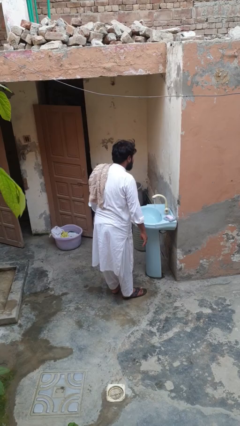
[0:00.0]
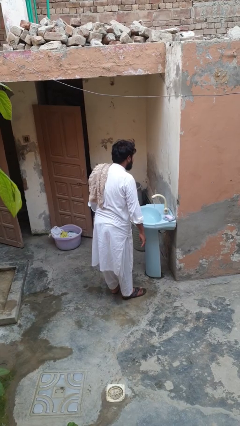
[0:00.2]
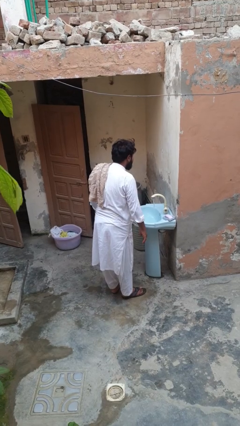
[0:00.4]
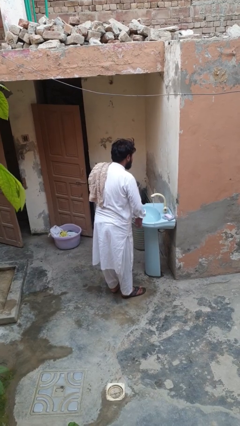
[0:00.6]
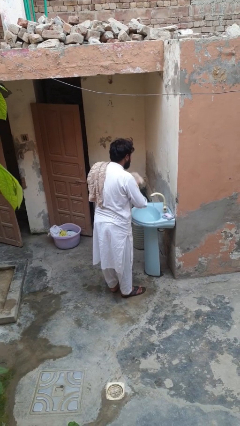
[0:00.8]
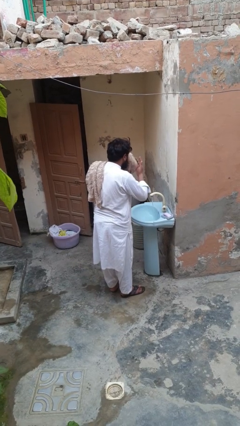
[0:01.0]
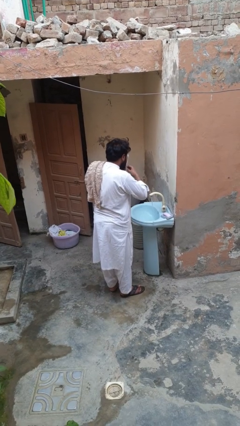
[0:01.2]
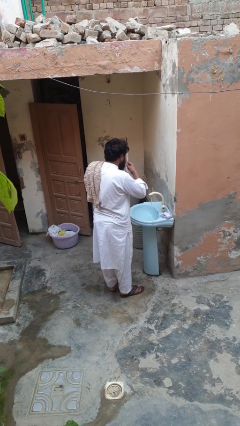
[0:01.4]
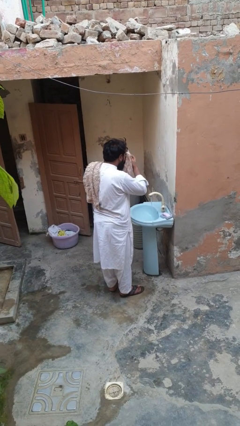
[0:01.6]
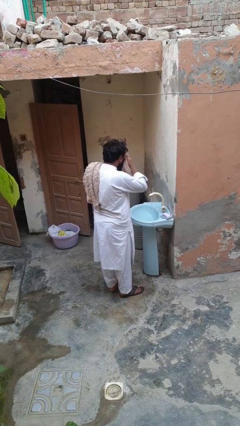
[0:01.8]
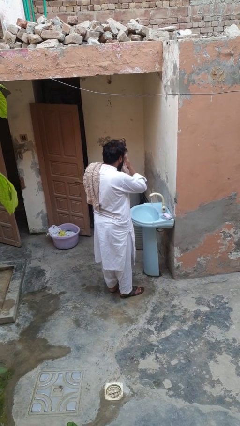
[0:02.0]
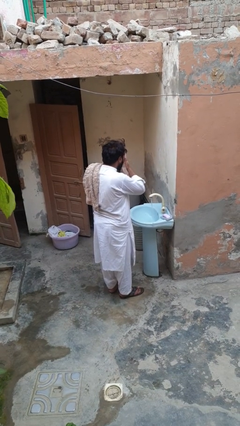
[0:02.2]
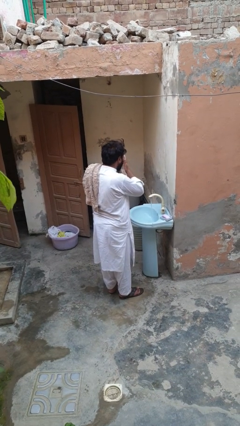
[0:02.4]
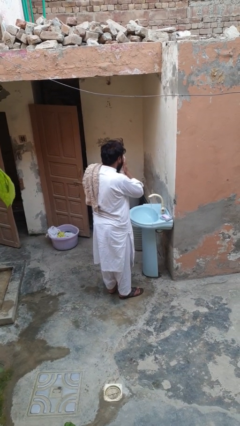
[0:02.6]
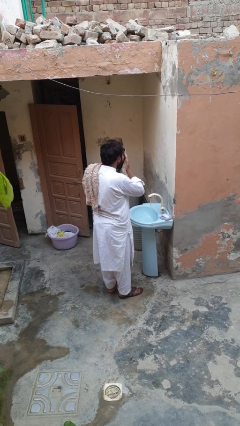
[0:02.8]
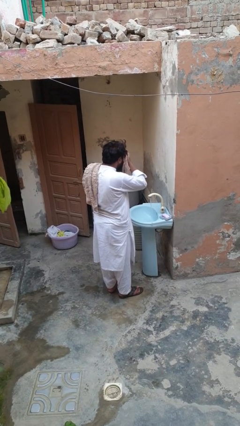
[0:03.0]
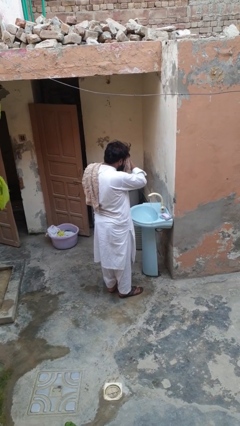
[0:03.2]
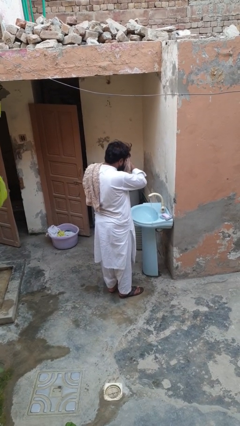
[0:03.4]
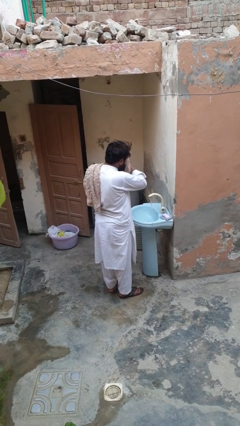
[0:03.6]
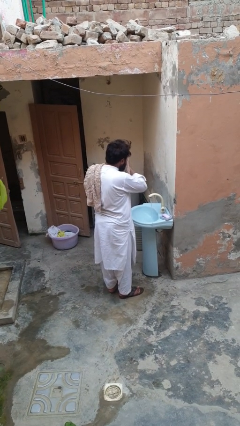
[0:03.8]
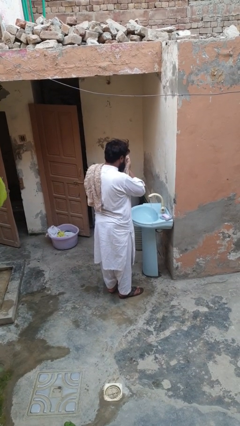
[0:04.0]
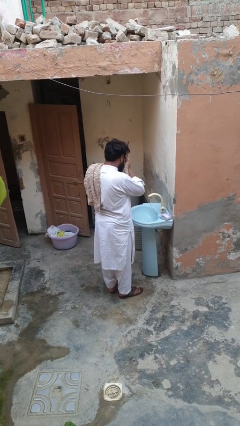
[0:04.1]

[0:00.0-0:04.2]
person dries face with towel

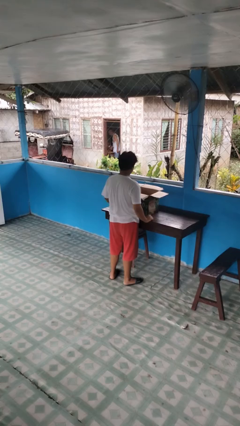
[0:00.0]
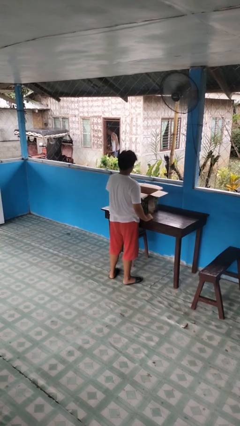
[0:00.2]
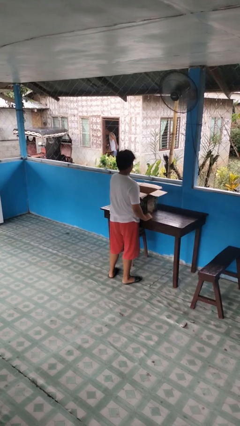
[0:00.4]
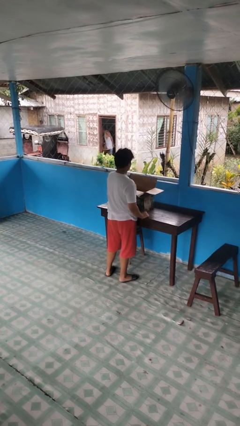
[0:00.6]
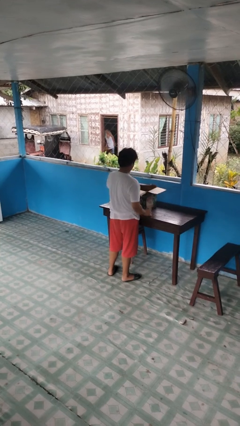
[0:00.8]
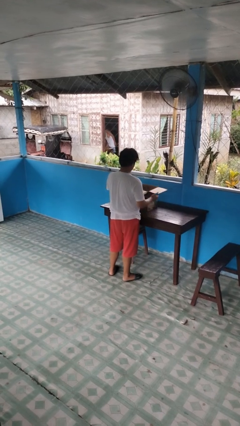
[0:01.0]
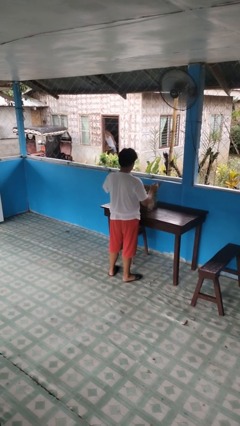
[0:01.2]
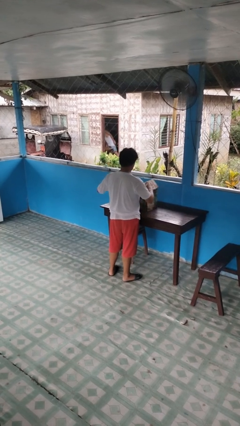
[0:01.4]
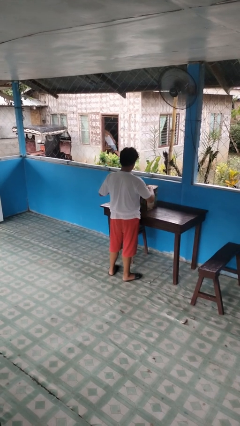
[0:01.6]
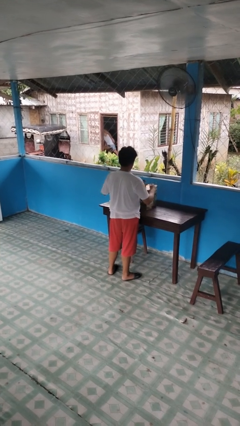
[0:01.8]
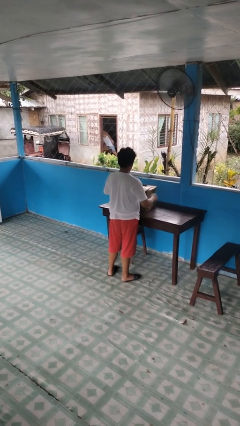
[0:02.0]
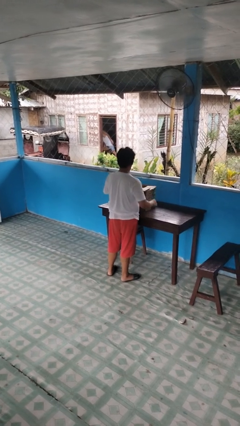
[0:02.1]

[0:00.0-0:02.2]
person closes box

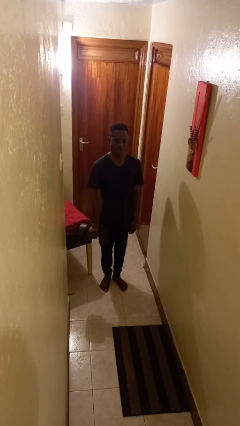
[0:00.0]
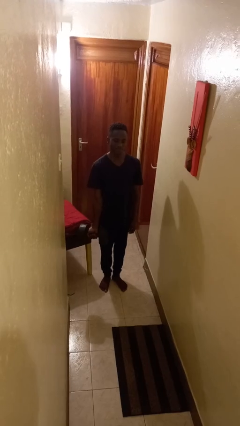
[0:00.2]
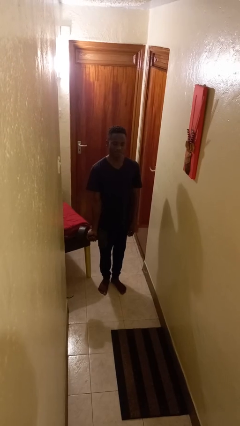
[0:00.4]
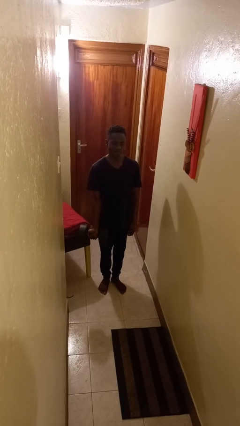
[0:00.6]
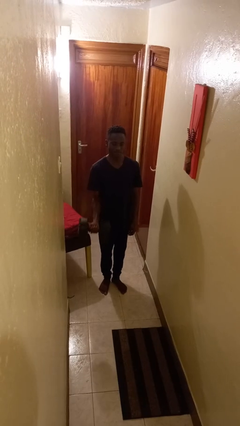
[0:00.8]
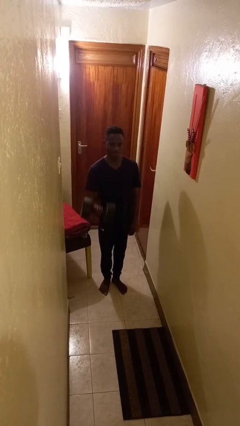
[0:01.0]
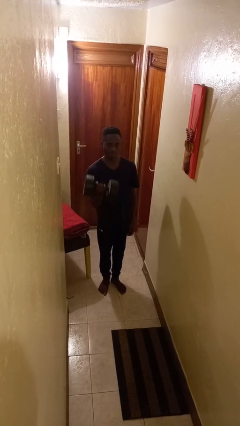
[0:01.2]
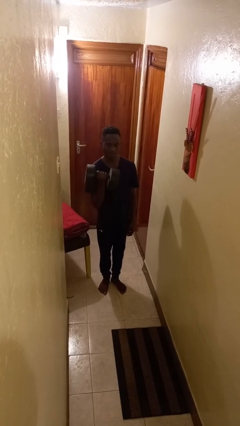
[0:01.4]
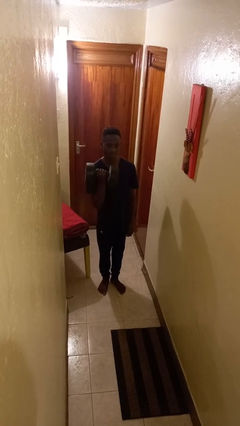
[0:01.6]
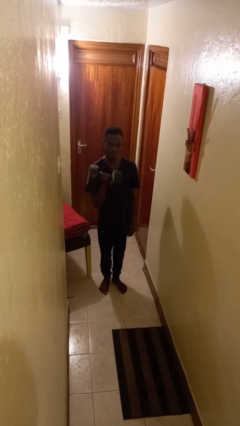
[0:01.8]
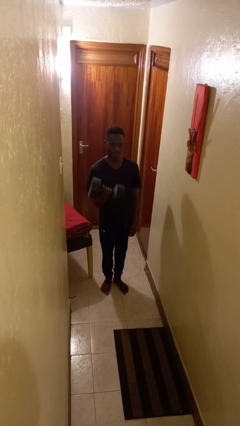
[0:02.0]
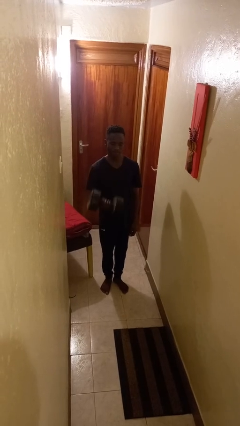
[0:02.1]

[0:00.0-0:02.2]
person lifts dumbbells

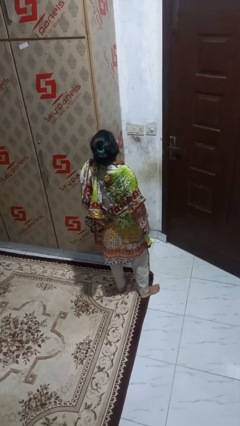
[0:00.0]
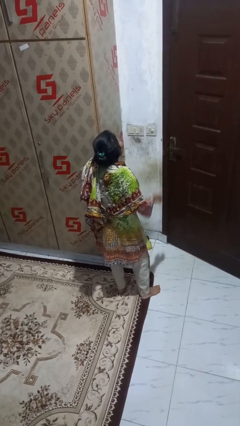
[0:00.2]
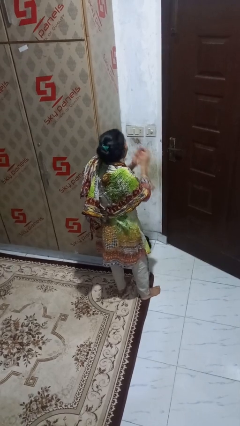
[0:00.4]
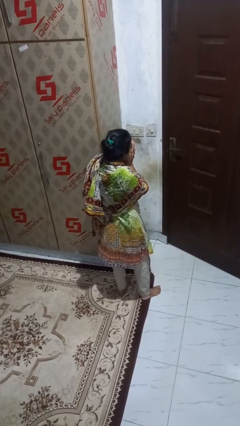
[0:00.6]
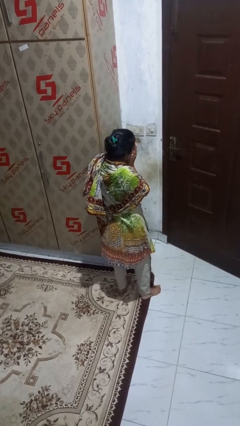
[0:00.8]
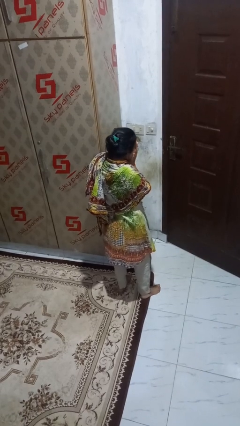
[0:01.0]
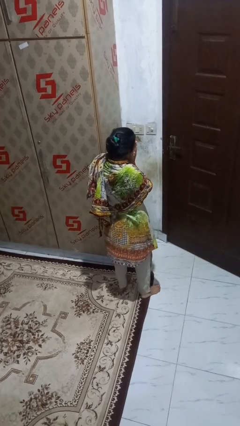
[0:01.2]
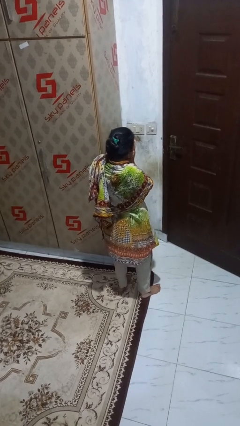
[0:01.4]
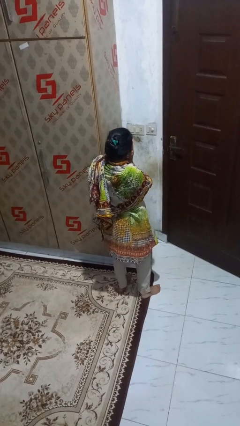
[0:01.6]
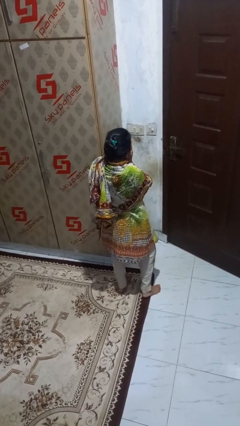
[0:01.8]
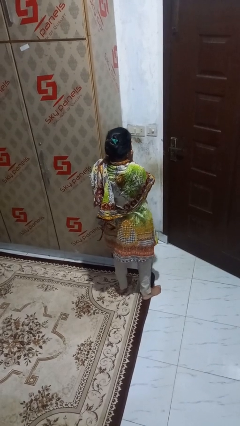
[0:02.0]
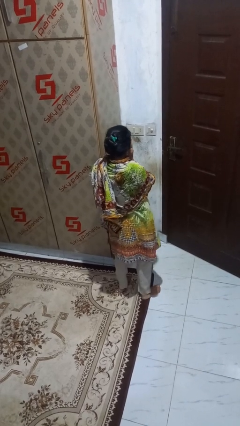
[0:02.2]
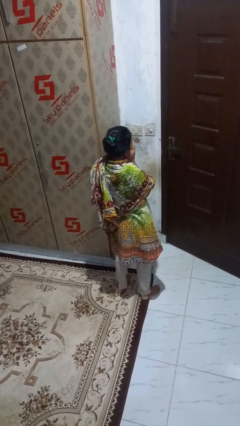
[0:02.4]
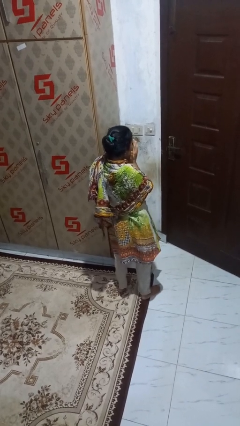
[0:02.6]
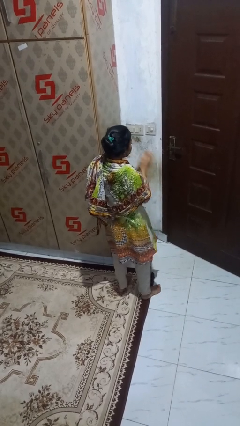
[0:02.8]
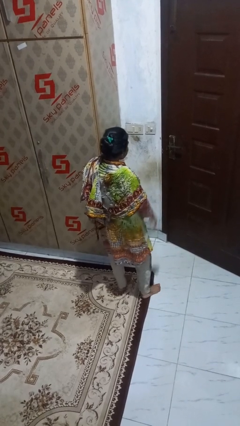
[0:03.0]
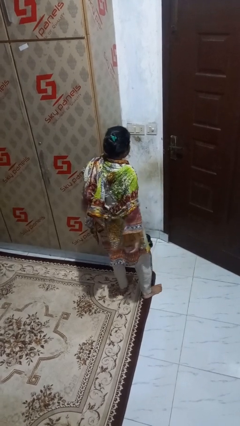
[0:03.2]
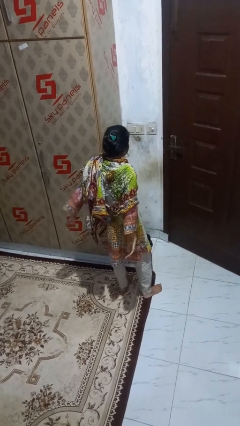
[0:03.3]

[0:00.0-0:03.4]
person sneezes into hand

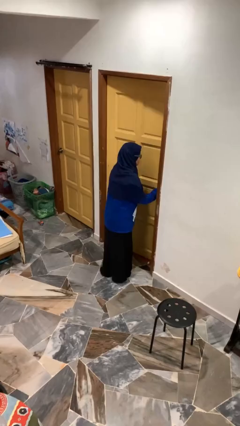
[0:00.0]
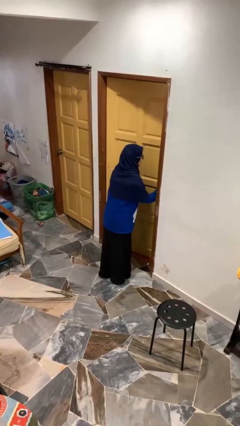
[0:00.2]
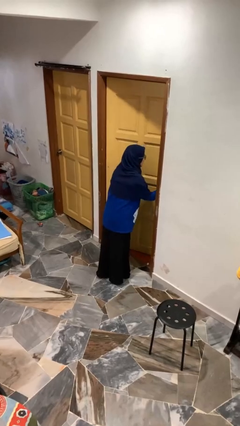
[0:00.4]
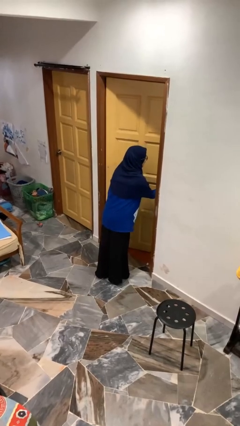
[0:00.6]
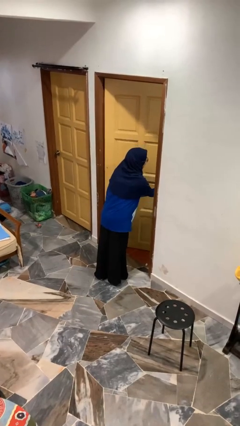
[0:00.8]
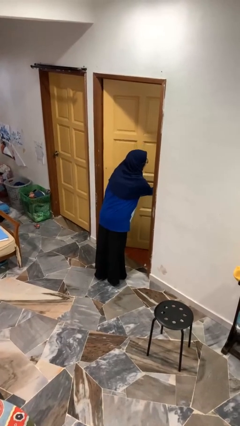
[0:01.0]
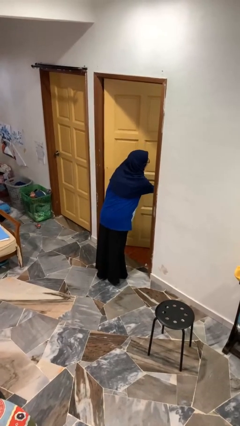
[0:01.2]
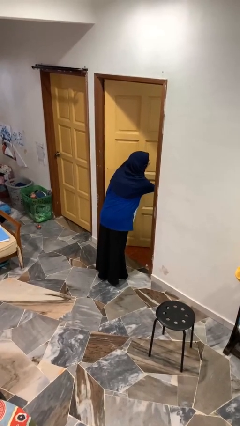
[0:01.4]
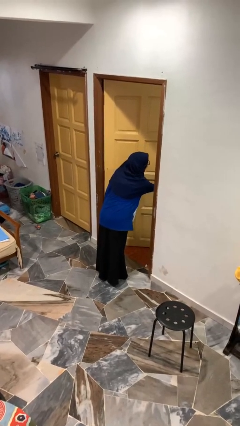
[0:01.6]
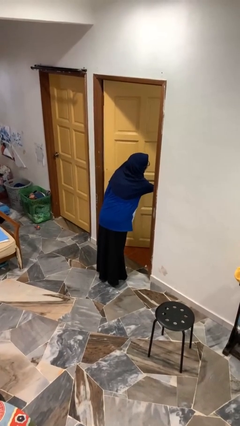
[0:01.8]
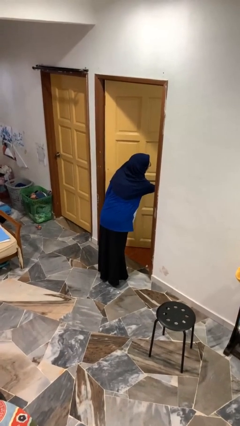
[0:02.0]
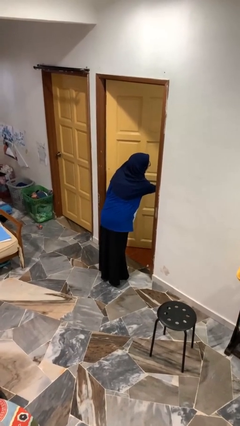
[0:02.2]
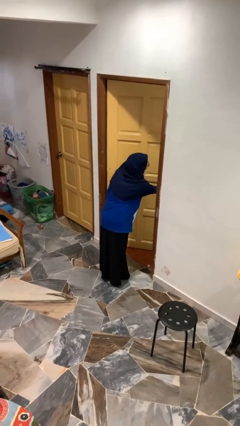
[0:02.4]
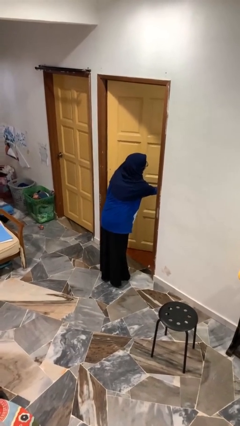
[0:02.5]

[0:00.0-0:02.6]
person opens facility door

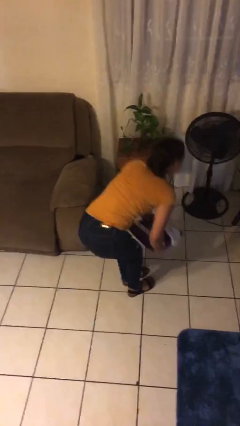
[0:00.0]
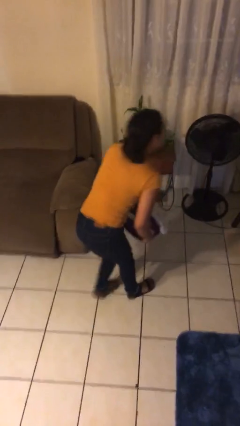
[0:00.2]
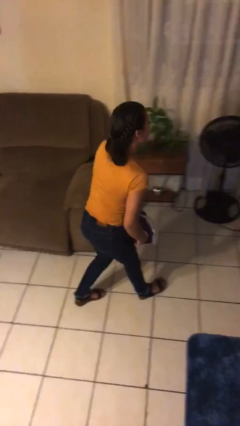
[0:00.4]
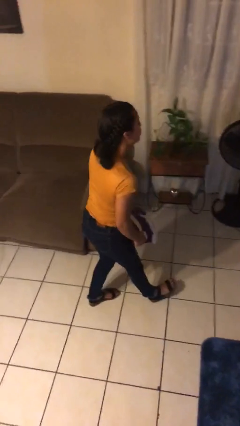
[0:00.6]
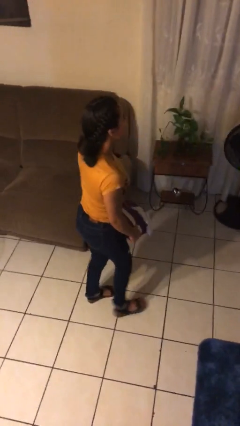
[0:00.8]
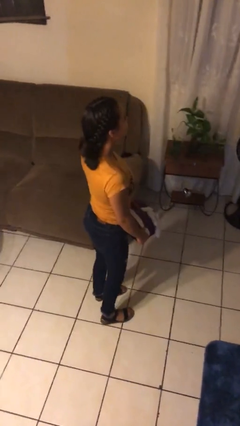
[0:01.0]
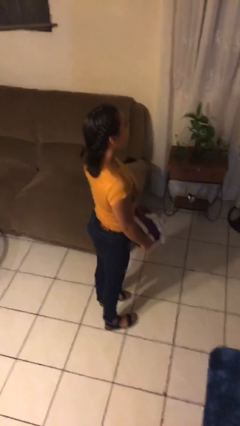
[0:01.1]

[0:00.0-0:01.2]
person picks up object from floor

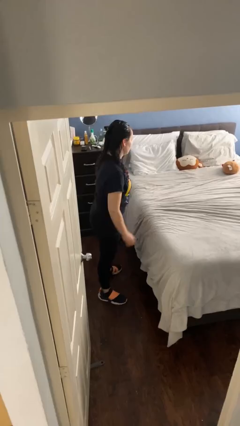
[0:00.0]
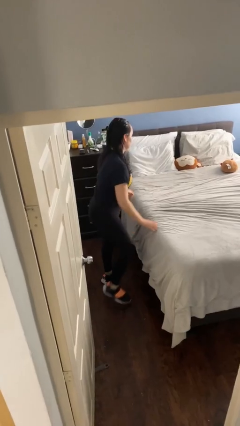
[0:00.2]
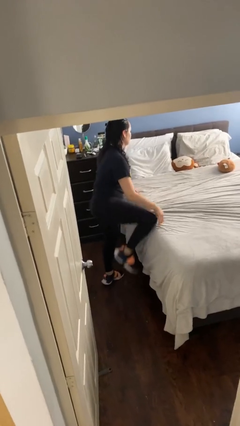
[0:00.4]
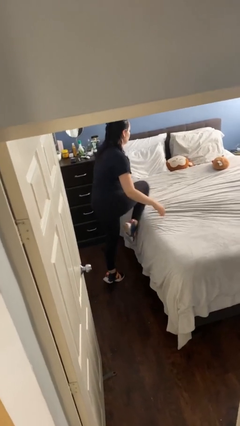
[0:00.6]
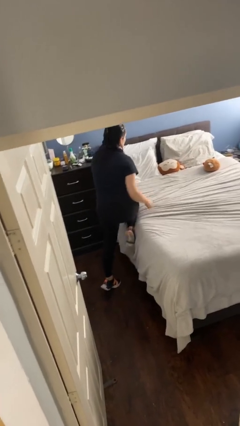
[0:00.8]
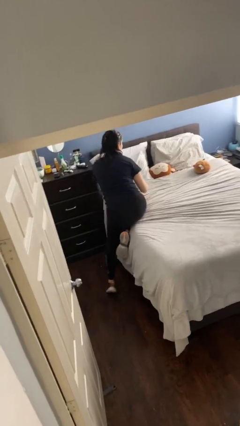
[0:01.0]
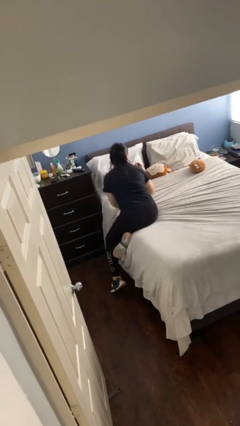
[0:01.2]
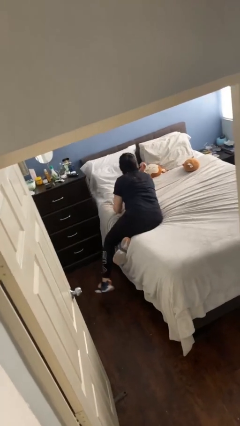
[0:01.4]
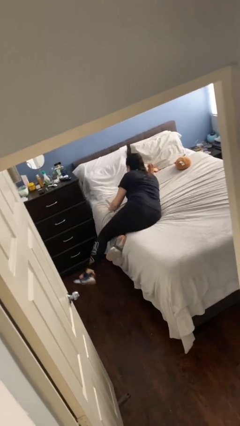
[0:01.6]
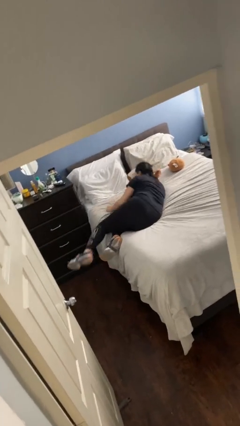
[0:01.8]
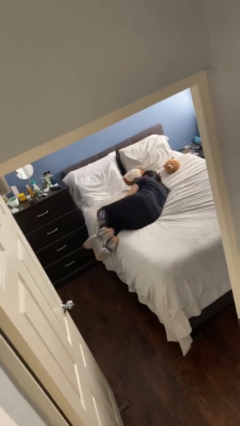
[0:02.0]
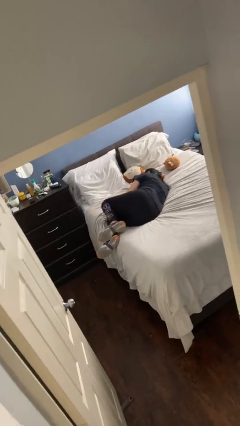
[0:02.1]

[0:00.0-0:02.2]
person lies down on bed
